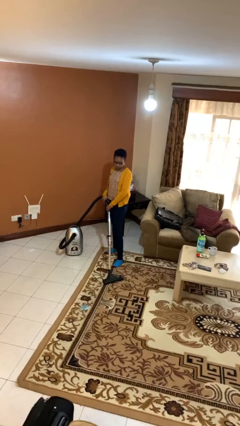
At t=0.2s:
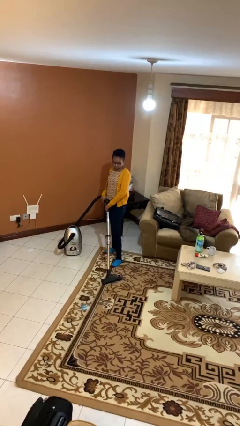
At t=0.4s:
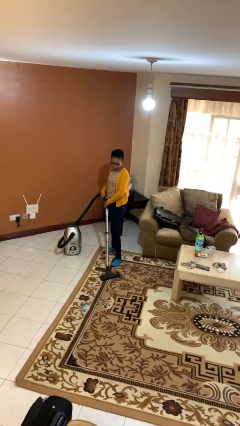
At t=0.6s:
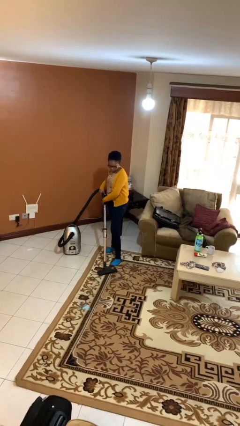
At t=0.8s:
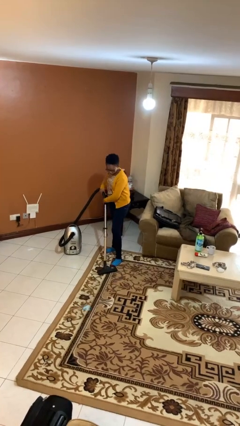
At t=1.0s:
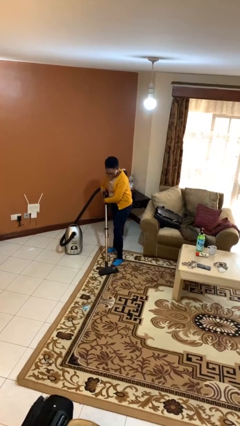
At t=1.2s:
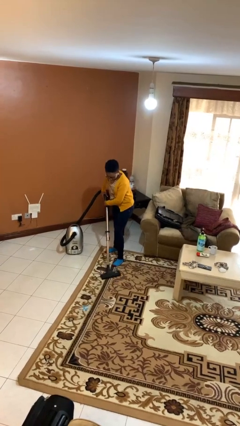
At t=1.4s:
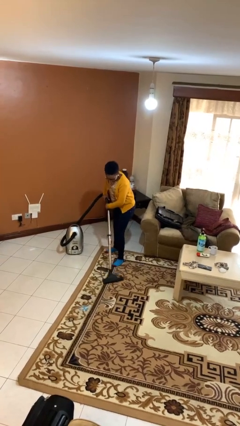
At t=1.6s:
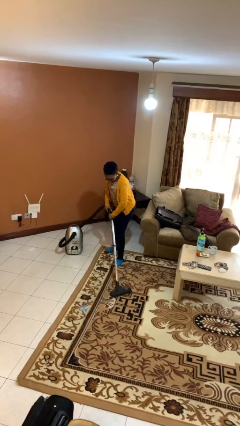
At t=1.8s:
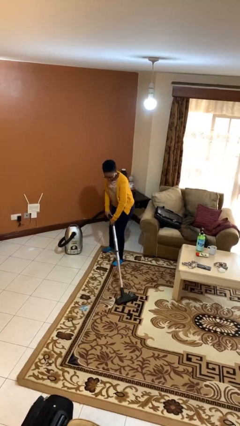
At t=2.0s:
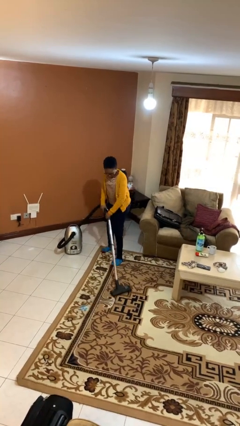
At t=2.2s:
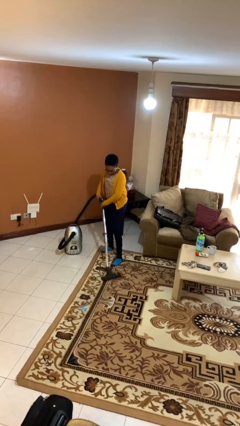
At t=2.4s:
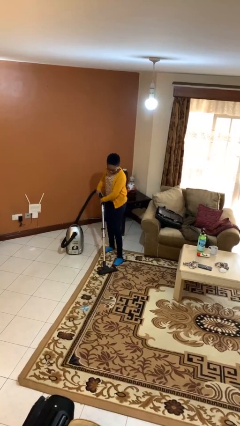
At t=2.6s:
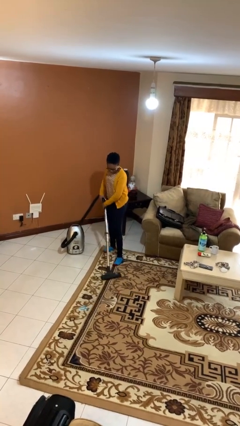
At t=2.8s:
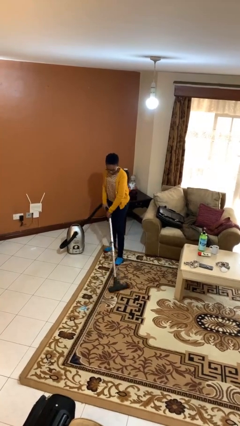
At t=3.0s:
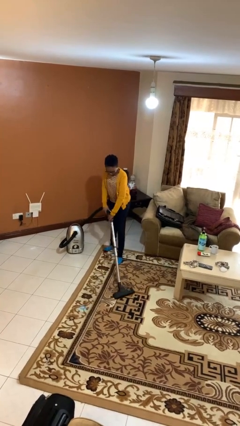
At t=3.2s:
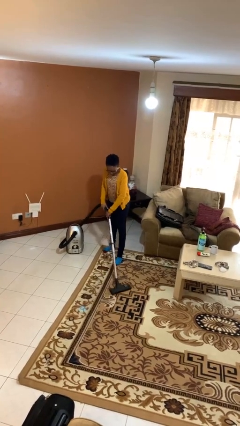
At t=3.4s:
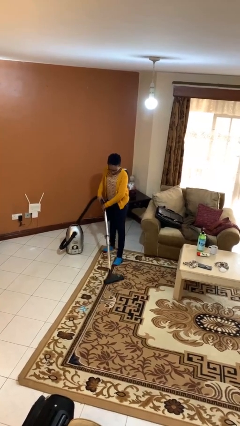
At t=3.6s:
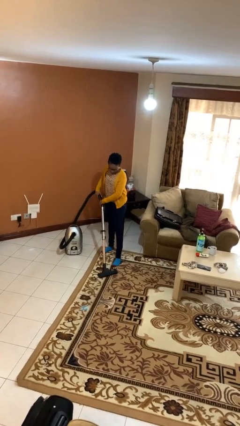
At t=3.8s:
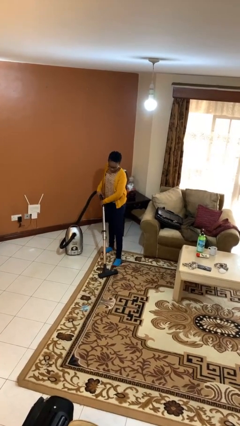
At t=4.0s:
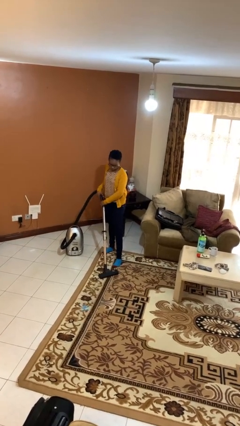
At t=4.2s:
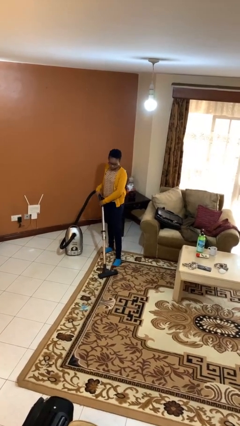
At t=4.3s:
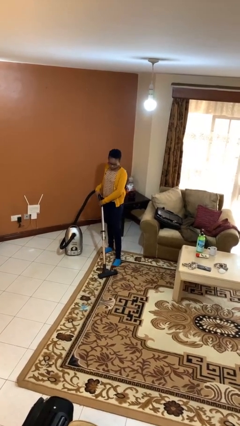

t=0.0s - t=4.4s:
person vacuums carpet

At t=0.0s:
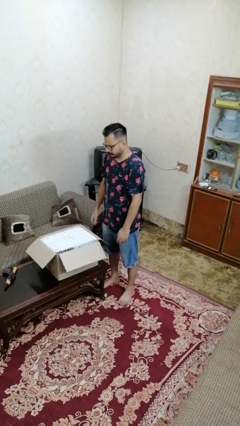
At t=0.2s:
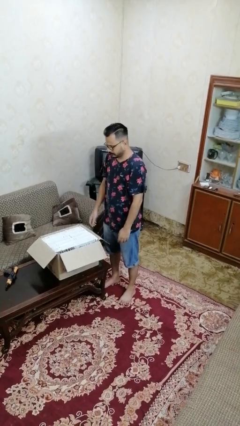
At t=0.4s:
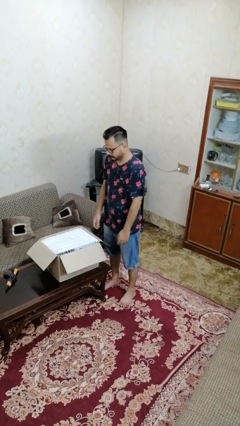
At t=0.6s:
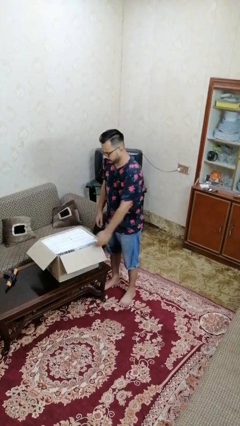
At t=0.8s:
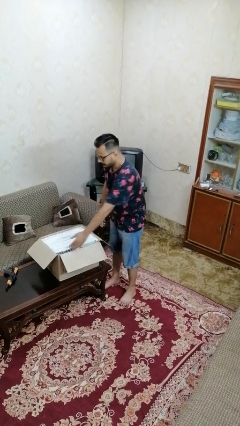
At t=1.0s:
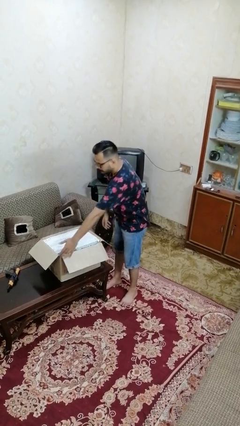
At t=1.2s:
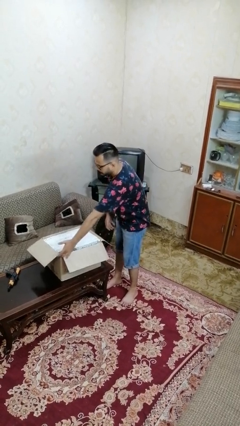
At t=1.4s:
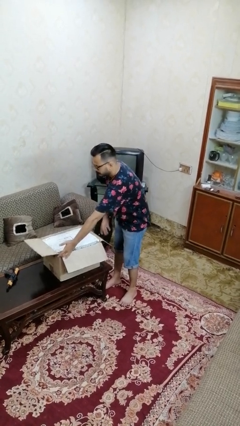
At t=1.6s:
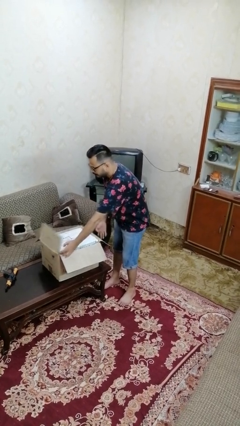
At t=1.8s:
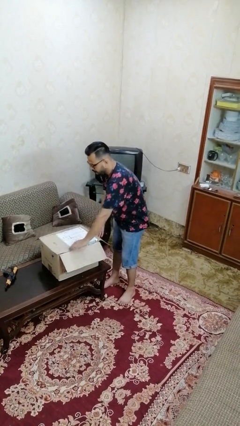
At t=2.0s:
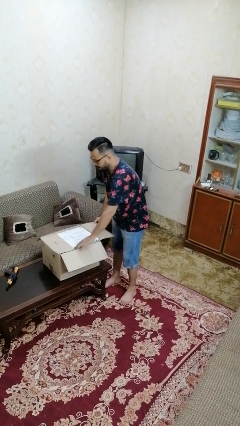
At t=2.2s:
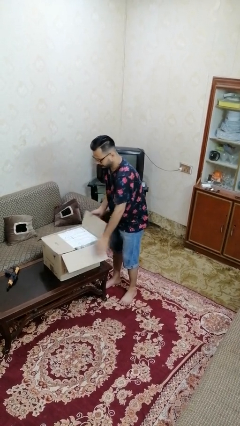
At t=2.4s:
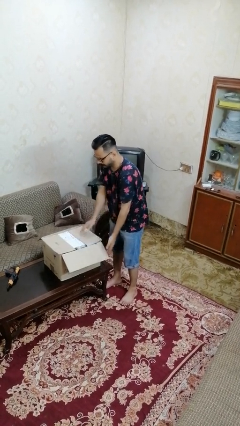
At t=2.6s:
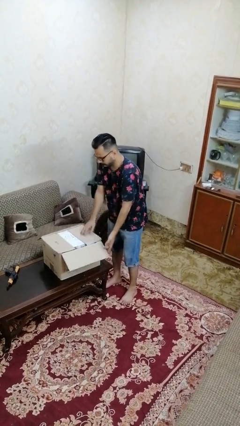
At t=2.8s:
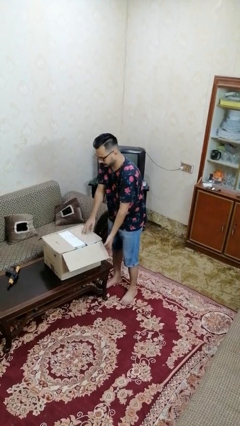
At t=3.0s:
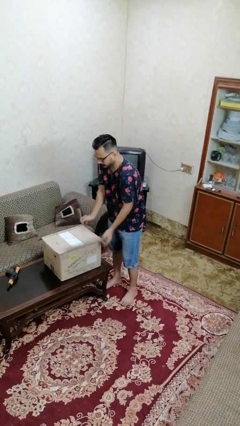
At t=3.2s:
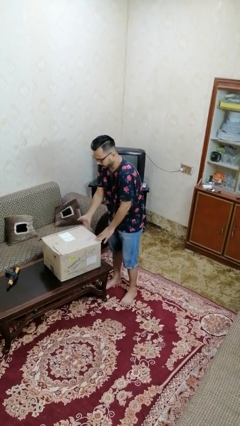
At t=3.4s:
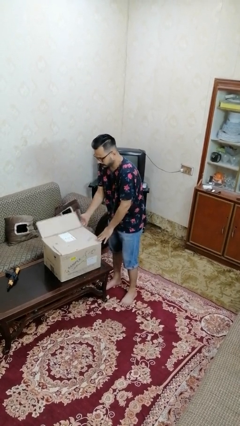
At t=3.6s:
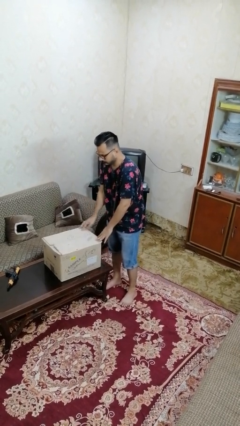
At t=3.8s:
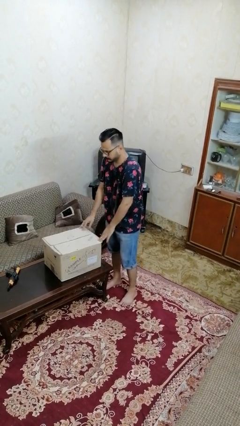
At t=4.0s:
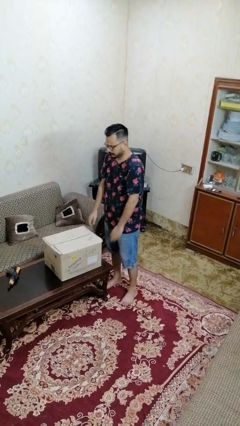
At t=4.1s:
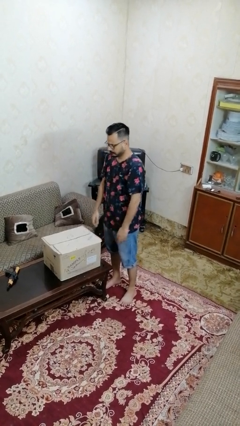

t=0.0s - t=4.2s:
person closes box

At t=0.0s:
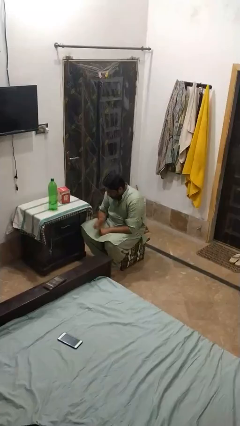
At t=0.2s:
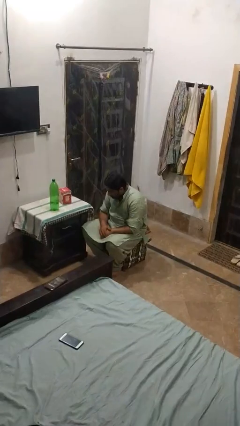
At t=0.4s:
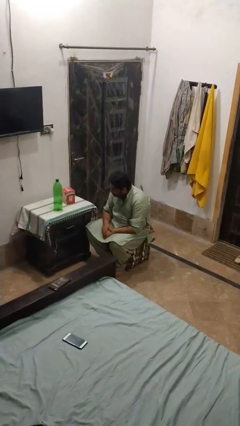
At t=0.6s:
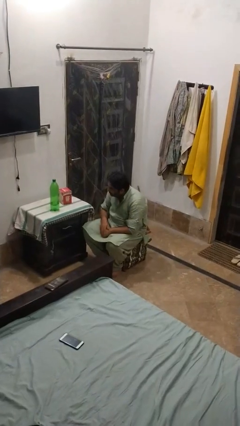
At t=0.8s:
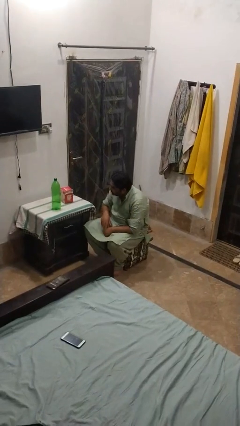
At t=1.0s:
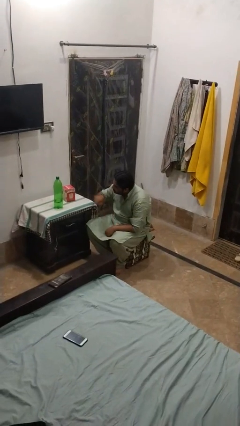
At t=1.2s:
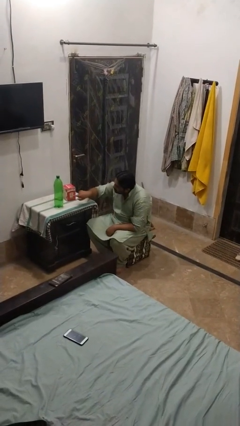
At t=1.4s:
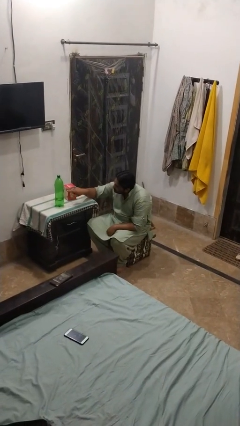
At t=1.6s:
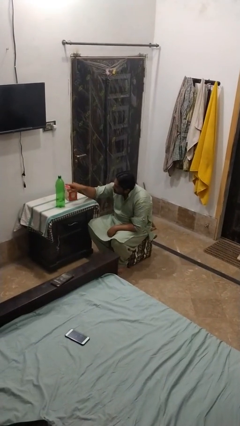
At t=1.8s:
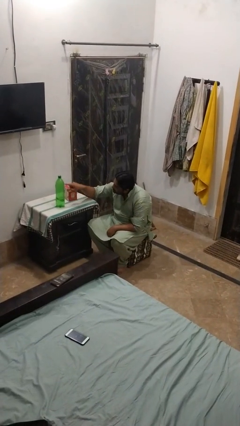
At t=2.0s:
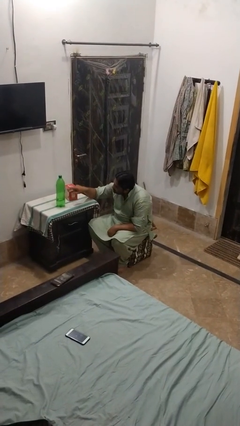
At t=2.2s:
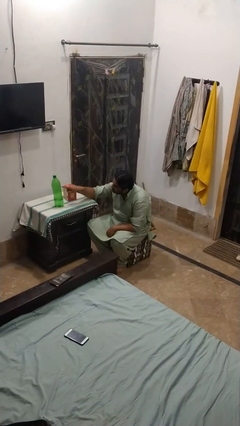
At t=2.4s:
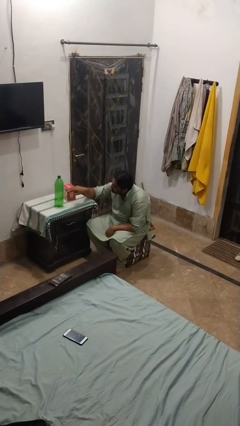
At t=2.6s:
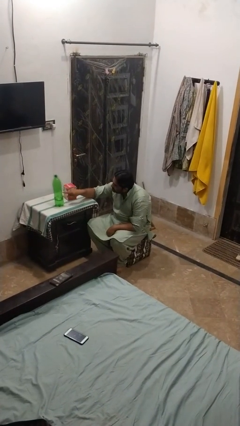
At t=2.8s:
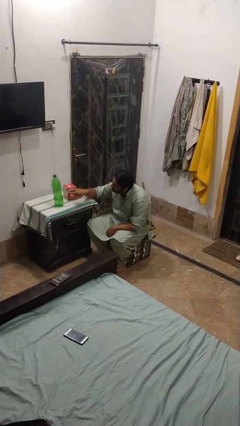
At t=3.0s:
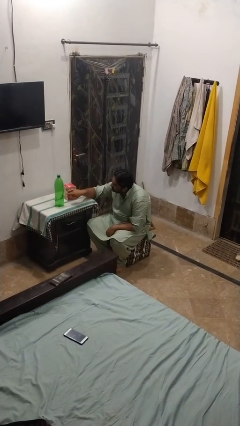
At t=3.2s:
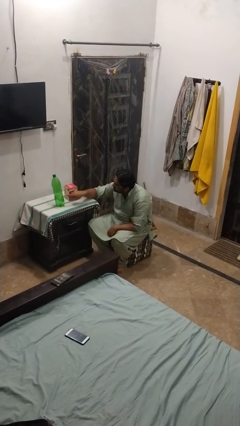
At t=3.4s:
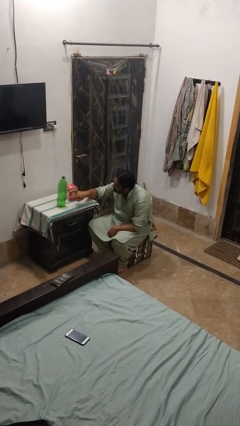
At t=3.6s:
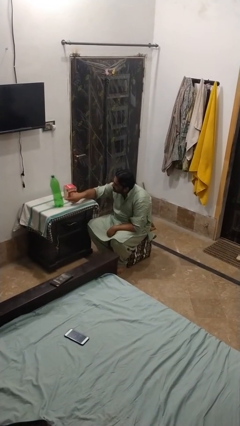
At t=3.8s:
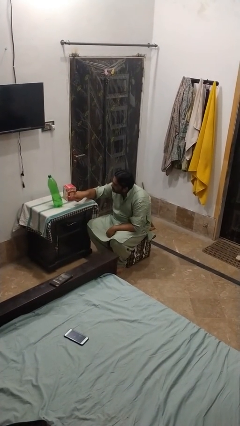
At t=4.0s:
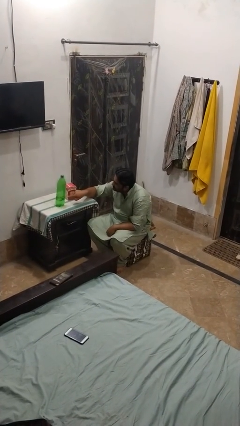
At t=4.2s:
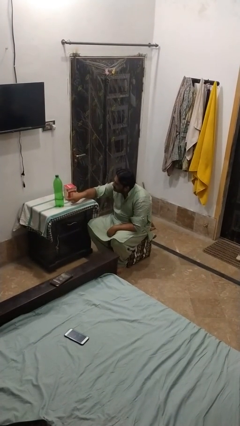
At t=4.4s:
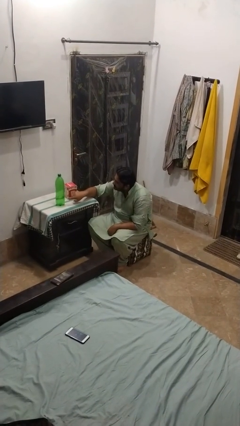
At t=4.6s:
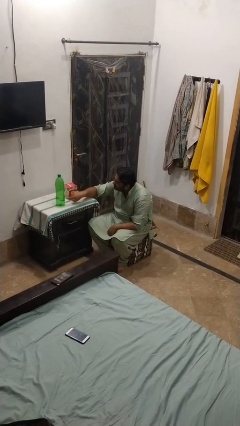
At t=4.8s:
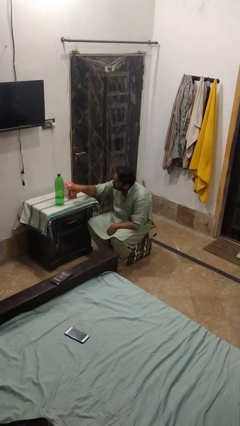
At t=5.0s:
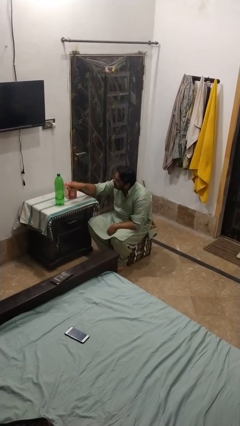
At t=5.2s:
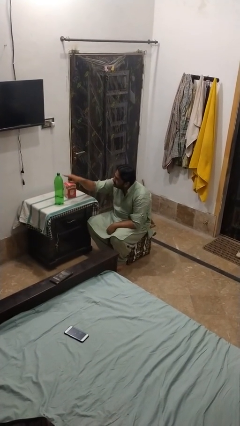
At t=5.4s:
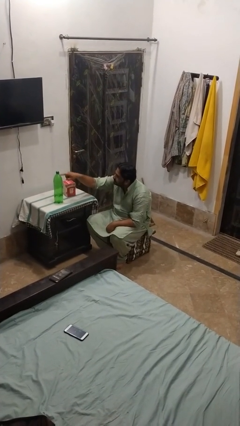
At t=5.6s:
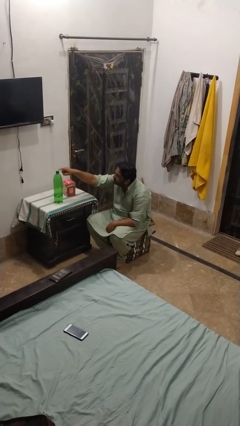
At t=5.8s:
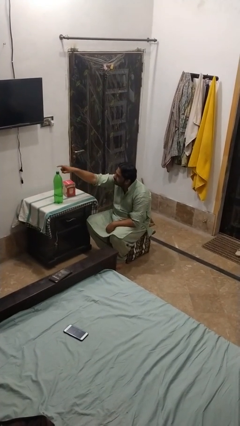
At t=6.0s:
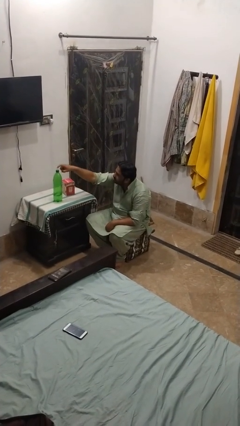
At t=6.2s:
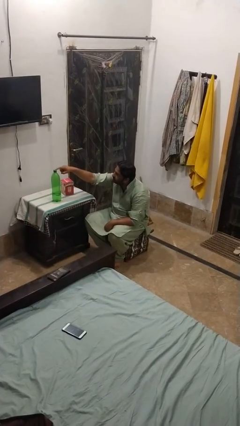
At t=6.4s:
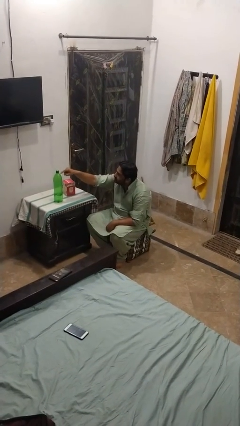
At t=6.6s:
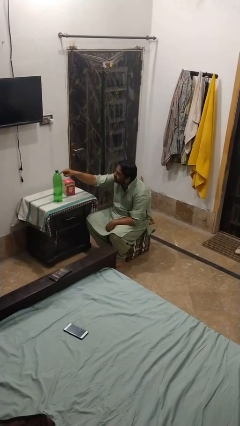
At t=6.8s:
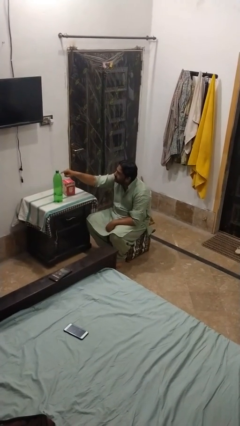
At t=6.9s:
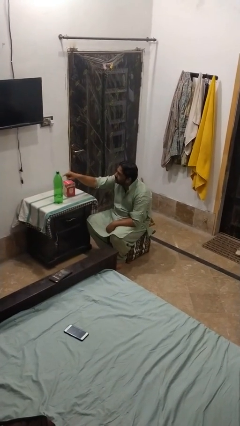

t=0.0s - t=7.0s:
person taps object with finger

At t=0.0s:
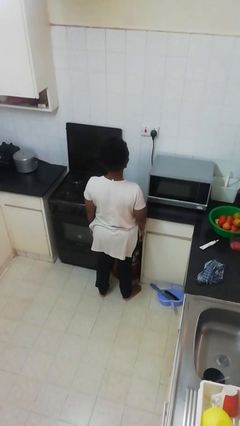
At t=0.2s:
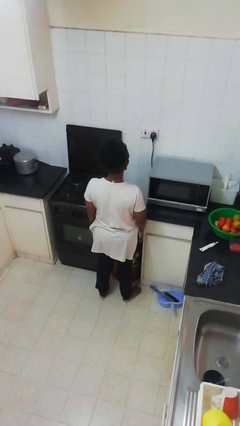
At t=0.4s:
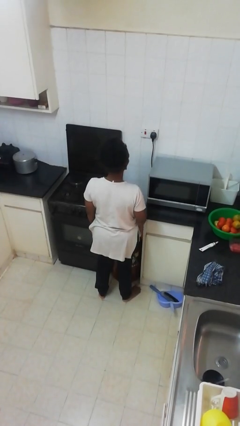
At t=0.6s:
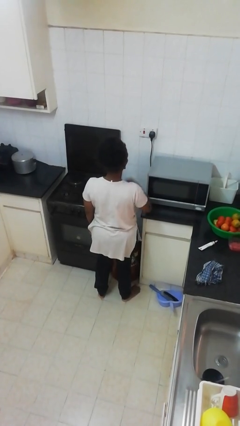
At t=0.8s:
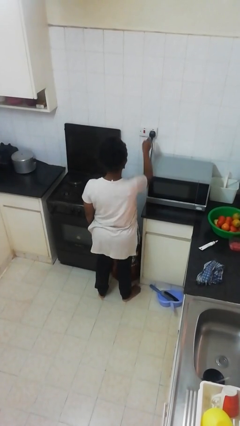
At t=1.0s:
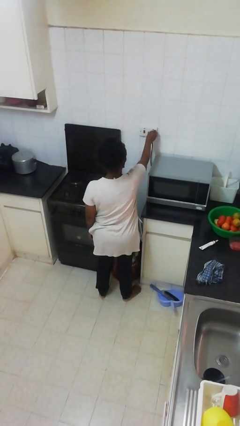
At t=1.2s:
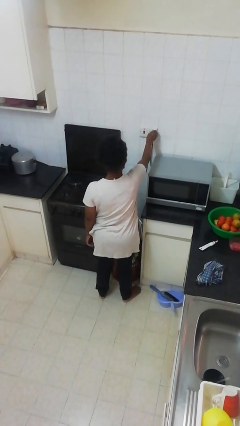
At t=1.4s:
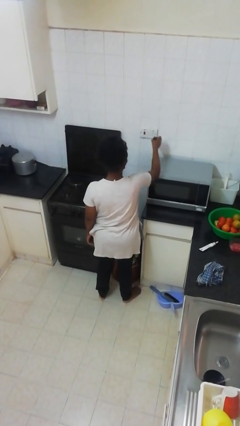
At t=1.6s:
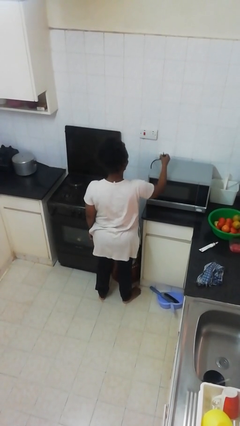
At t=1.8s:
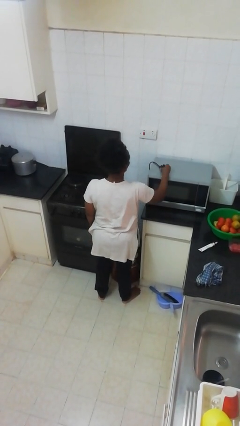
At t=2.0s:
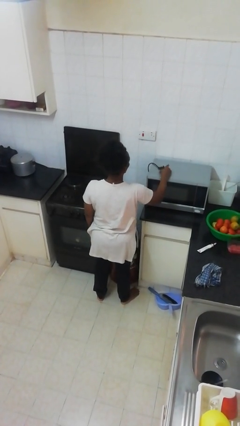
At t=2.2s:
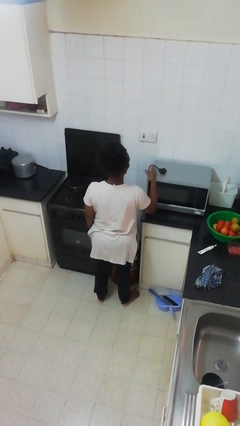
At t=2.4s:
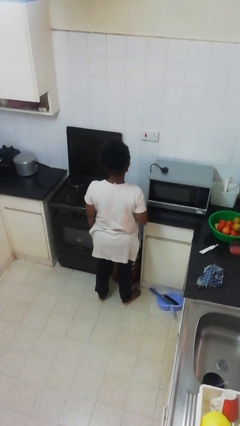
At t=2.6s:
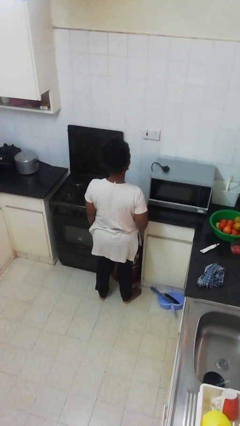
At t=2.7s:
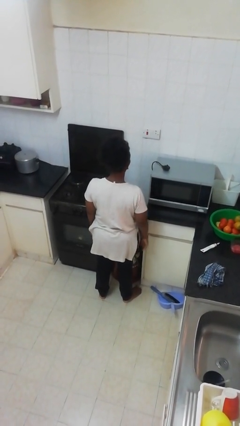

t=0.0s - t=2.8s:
person unplugs from electrical socket
